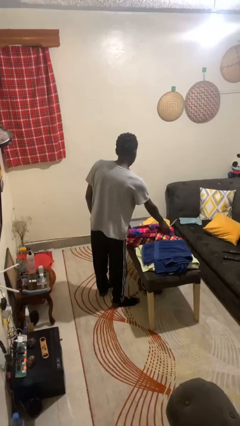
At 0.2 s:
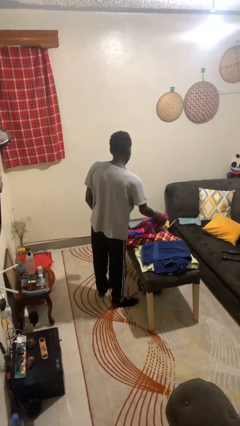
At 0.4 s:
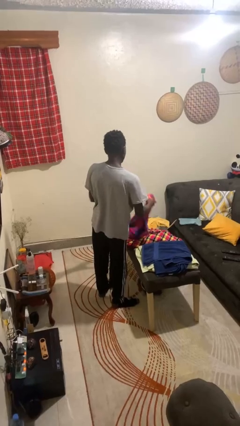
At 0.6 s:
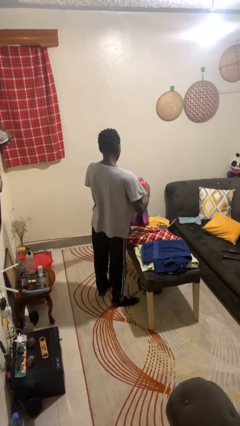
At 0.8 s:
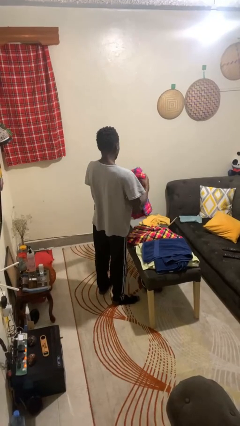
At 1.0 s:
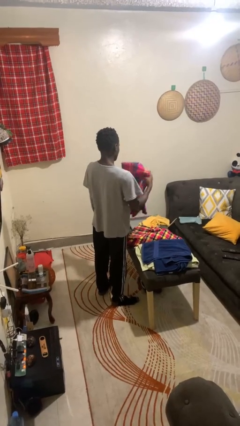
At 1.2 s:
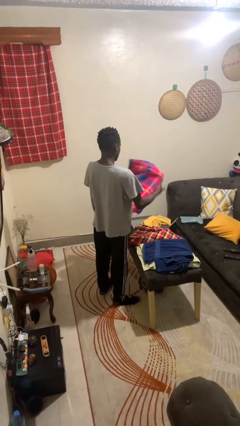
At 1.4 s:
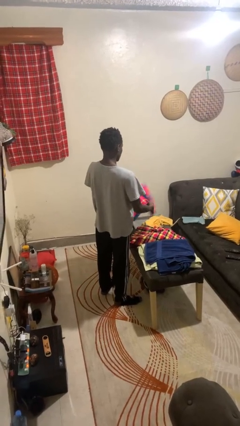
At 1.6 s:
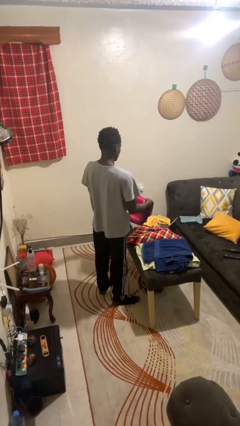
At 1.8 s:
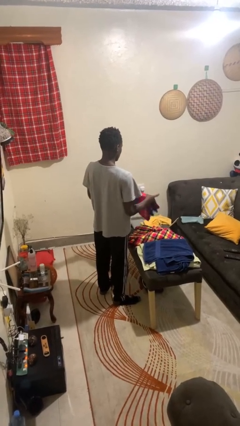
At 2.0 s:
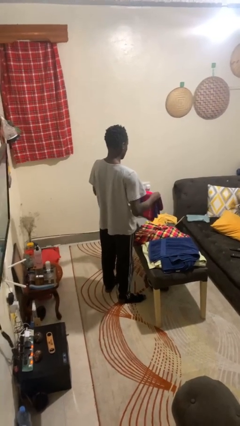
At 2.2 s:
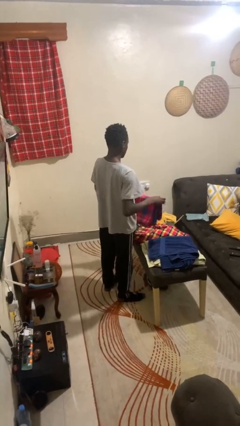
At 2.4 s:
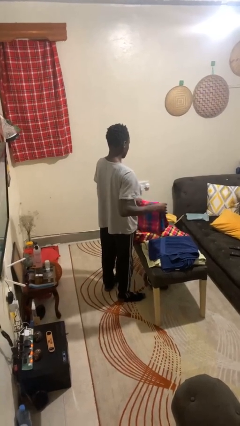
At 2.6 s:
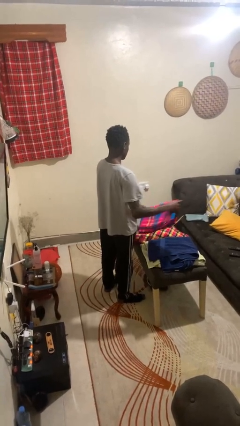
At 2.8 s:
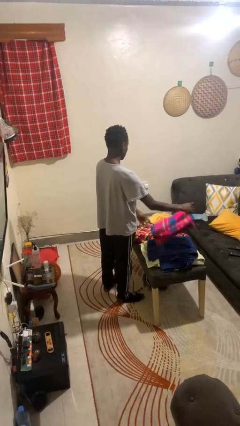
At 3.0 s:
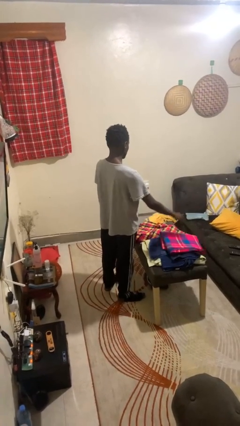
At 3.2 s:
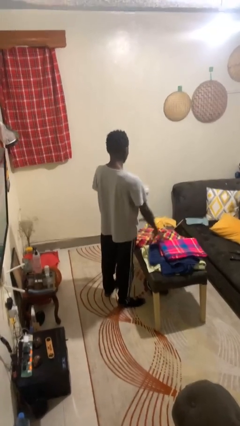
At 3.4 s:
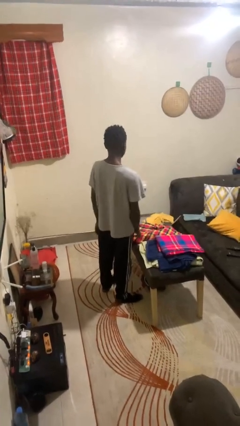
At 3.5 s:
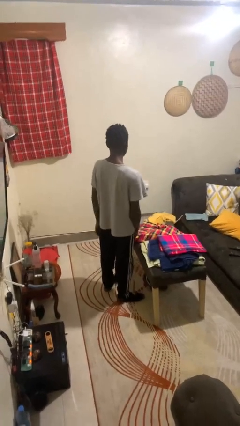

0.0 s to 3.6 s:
person folds towel

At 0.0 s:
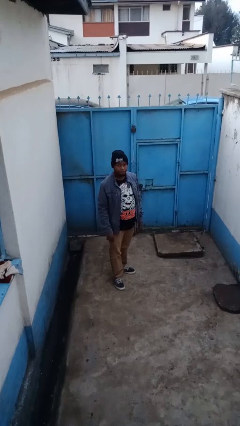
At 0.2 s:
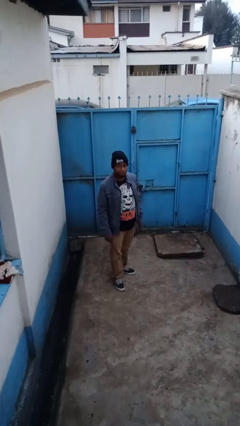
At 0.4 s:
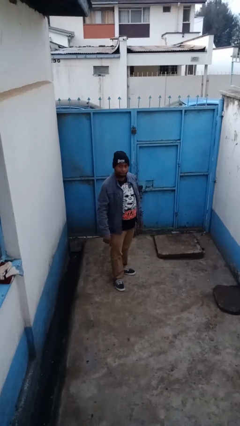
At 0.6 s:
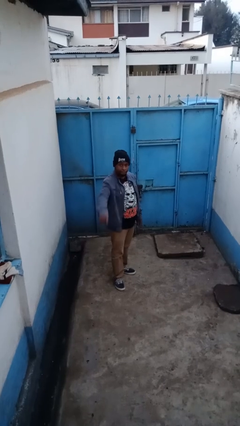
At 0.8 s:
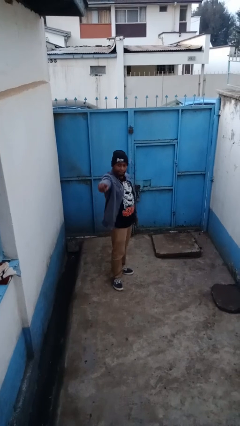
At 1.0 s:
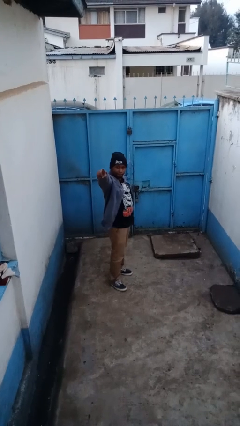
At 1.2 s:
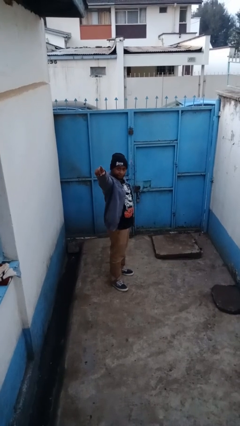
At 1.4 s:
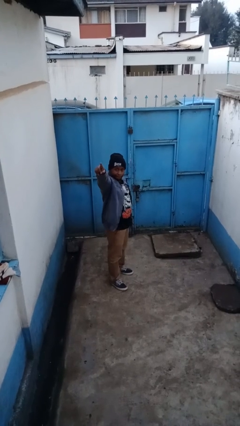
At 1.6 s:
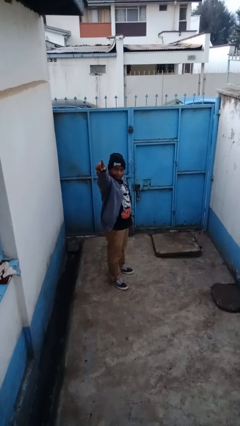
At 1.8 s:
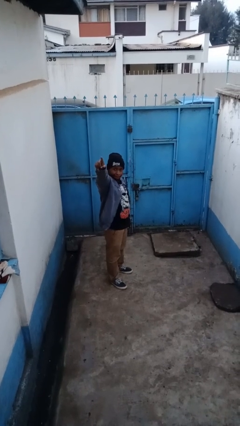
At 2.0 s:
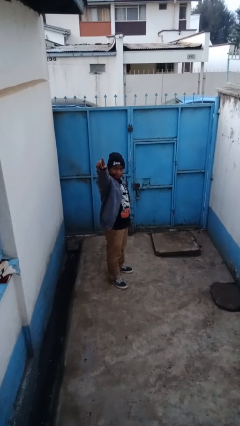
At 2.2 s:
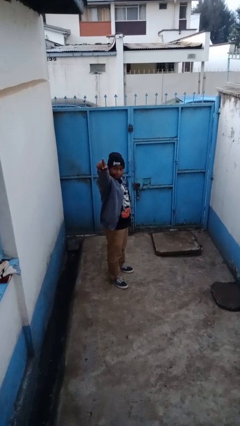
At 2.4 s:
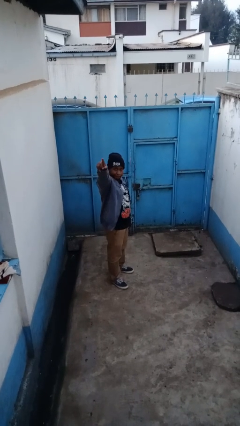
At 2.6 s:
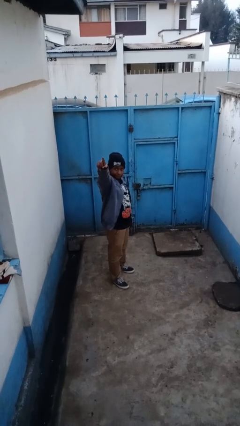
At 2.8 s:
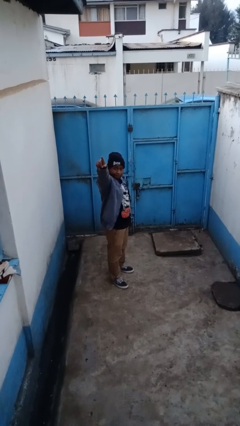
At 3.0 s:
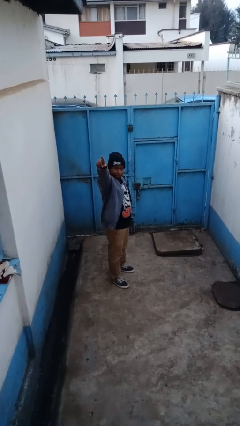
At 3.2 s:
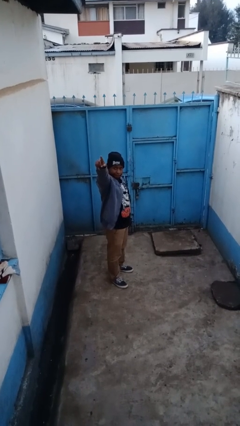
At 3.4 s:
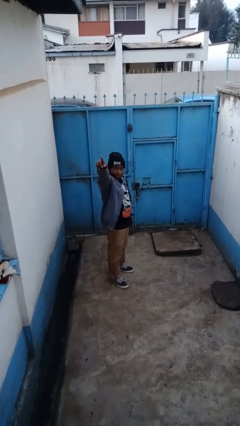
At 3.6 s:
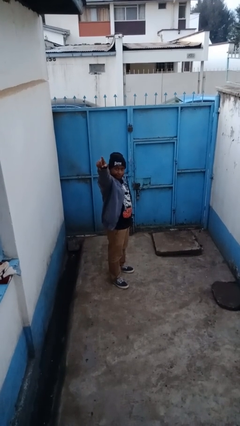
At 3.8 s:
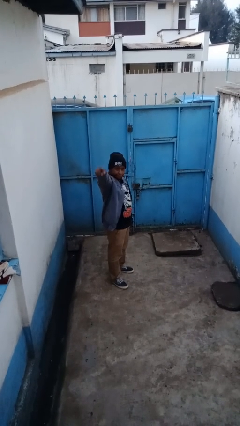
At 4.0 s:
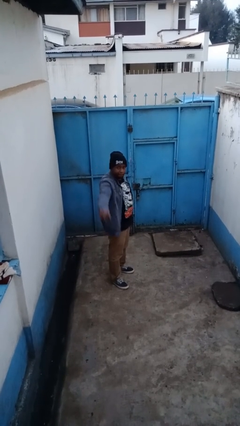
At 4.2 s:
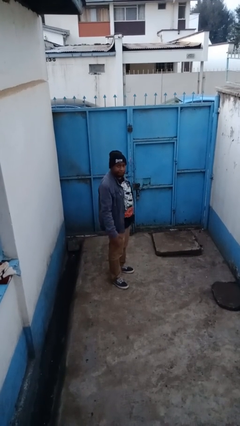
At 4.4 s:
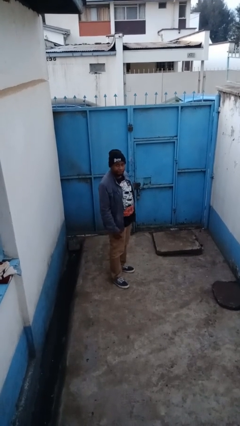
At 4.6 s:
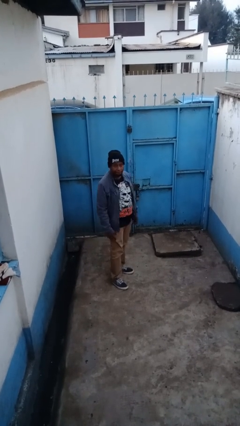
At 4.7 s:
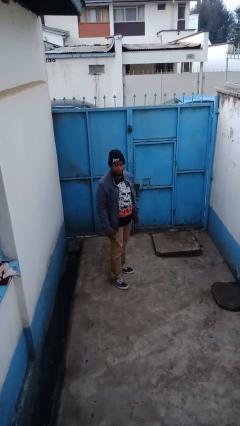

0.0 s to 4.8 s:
person points at person

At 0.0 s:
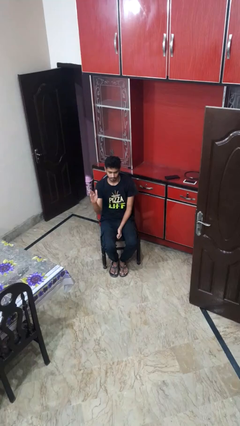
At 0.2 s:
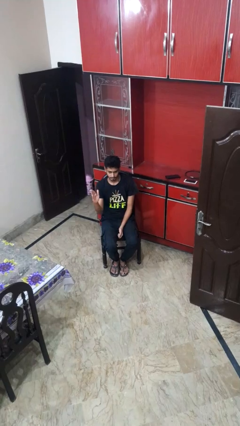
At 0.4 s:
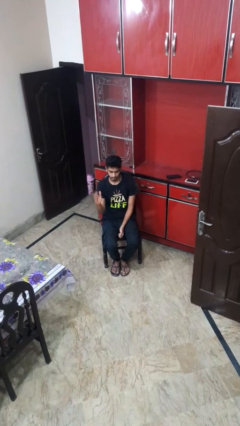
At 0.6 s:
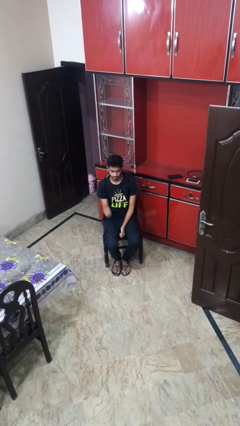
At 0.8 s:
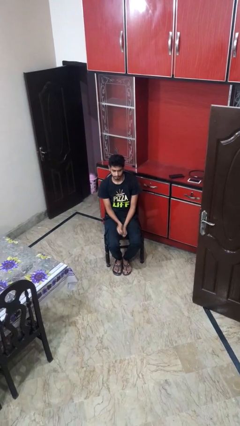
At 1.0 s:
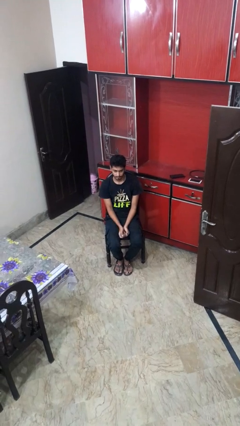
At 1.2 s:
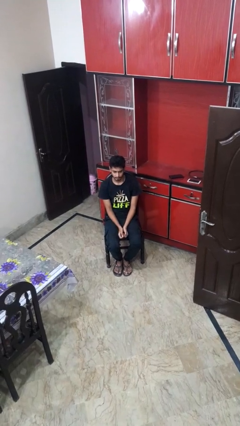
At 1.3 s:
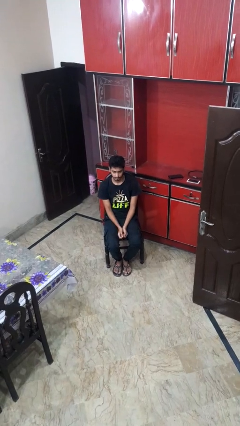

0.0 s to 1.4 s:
person gestures swipe right

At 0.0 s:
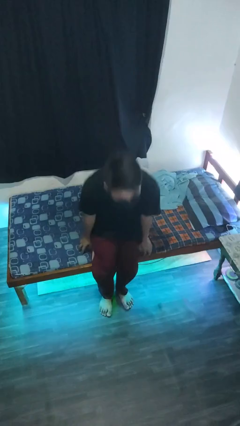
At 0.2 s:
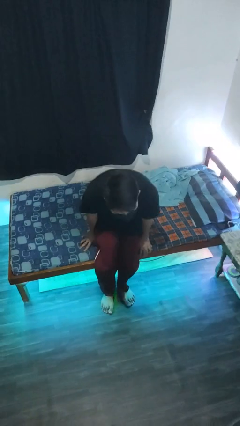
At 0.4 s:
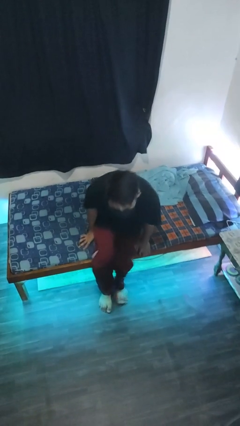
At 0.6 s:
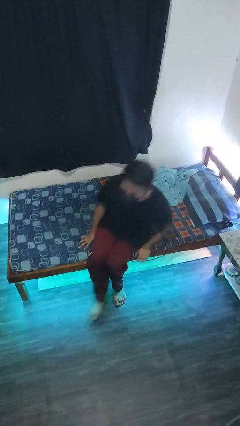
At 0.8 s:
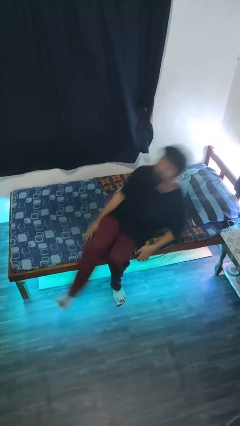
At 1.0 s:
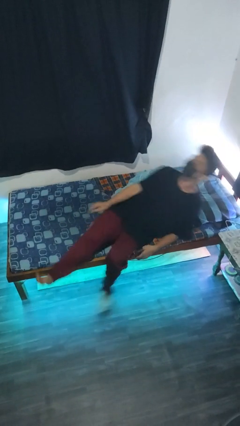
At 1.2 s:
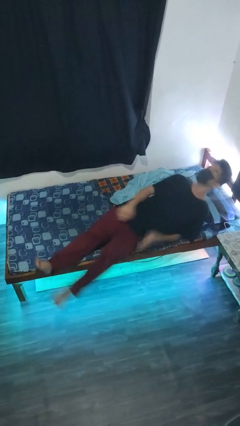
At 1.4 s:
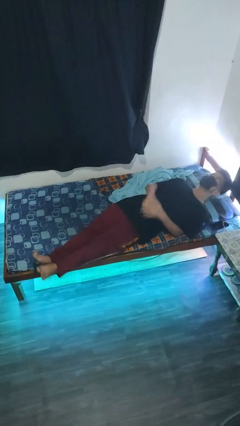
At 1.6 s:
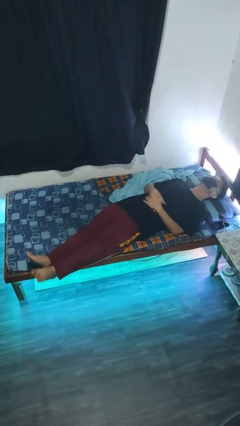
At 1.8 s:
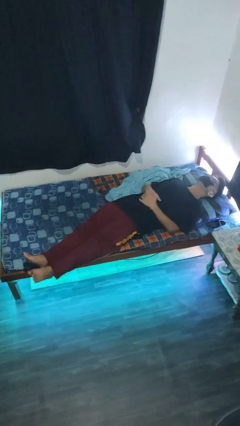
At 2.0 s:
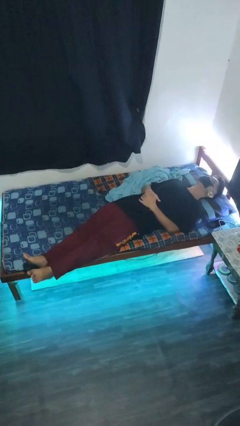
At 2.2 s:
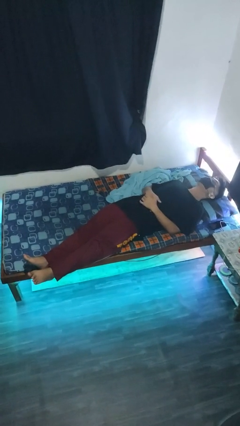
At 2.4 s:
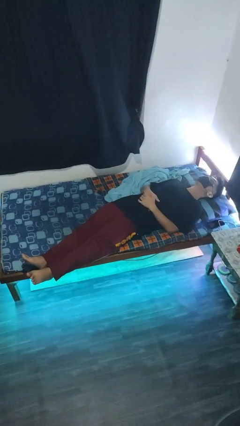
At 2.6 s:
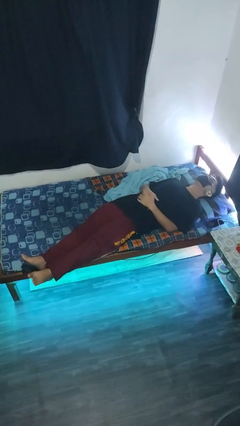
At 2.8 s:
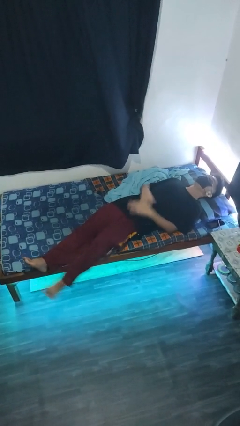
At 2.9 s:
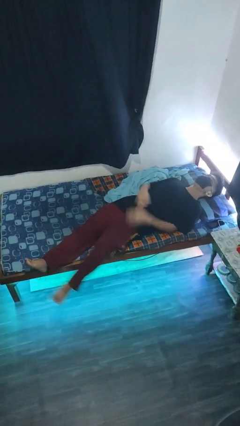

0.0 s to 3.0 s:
person lies down on bed

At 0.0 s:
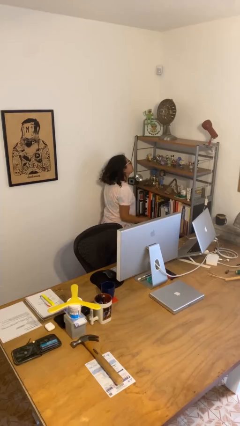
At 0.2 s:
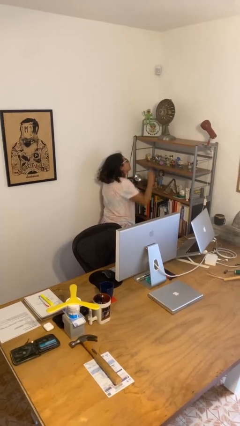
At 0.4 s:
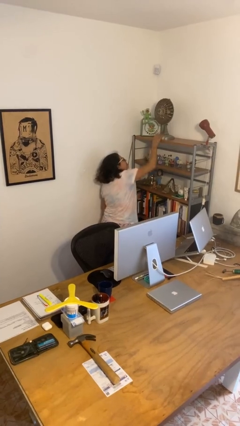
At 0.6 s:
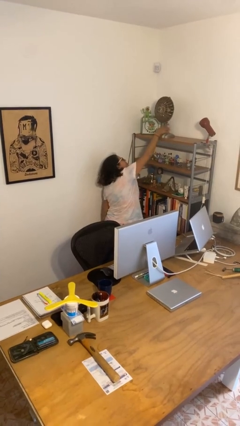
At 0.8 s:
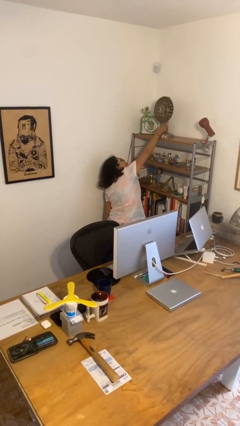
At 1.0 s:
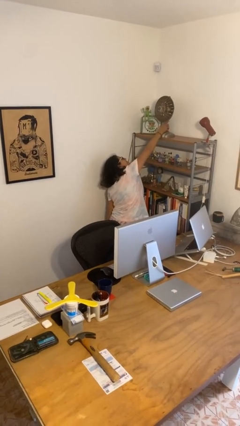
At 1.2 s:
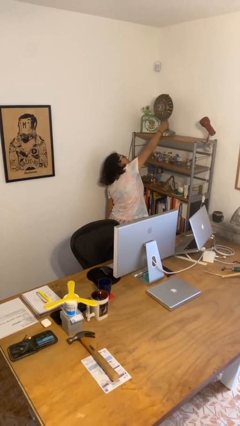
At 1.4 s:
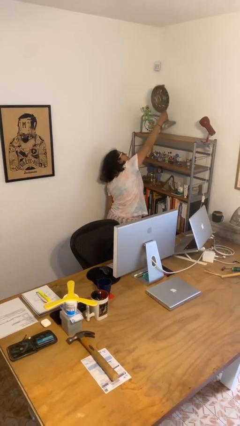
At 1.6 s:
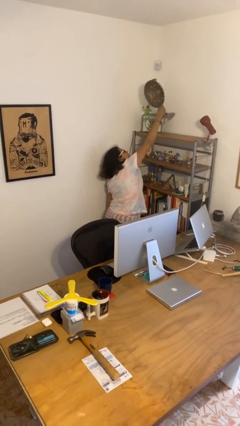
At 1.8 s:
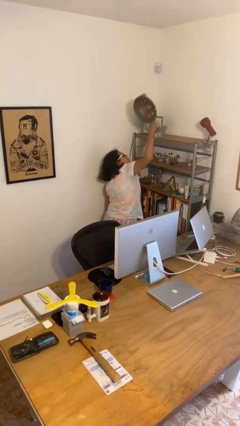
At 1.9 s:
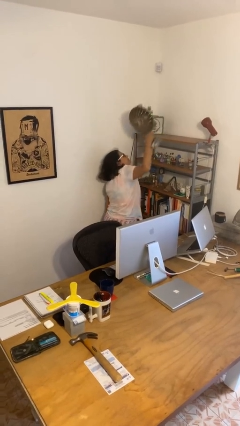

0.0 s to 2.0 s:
person picks up object from shelf

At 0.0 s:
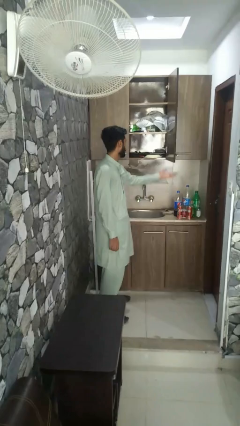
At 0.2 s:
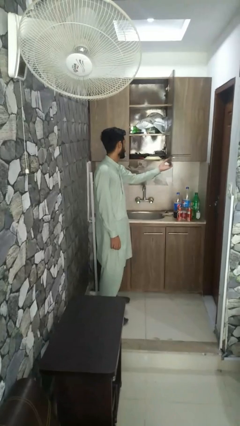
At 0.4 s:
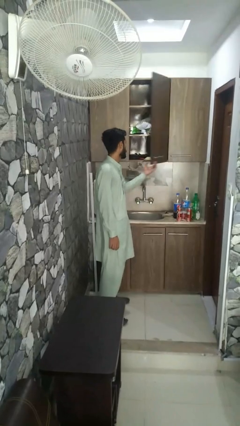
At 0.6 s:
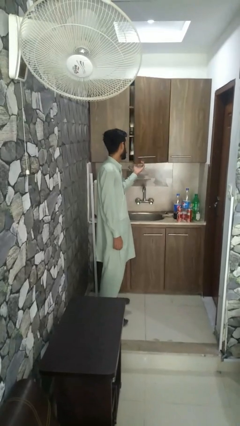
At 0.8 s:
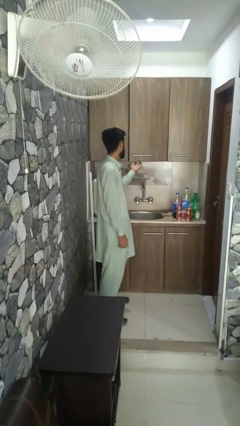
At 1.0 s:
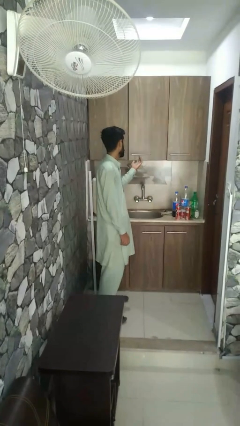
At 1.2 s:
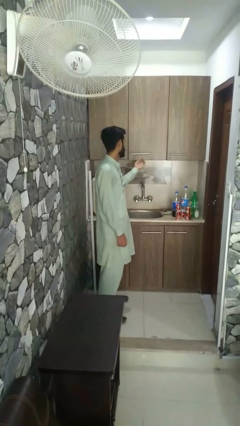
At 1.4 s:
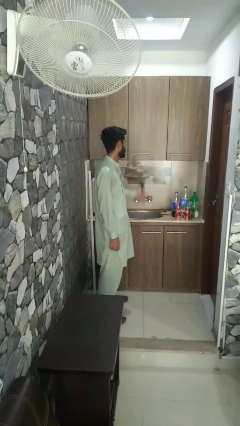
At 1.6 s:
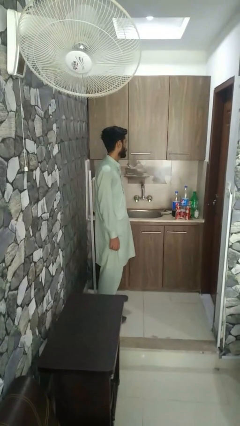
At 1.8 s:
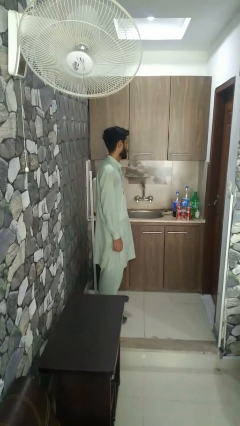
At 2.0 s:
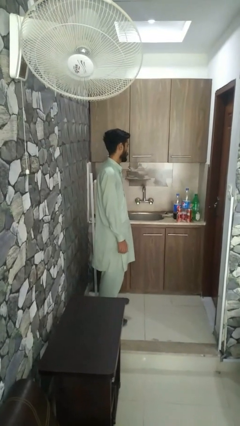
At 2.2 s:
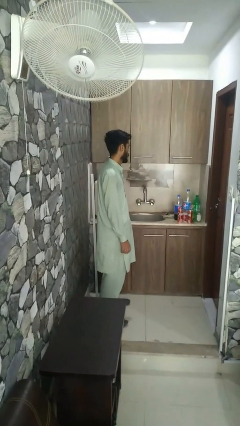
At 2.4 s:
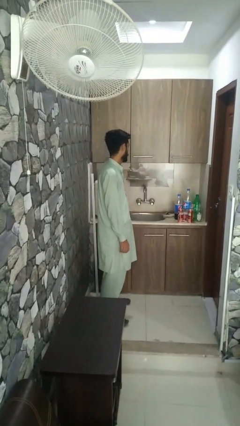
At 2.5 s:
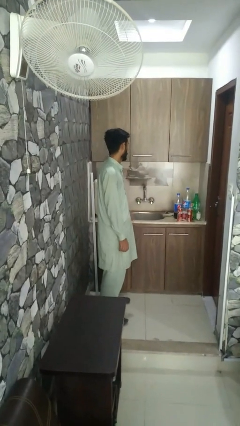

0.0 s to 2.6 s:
person closes closet door
